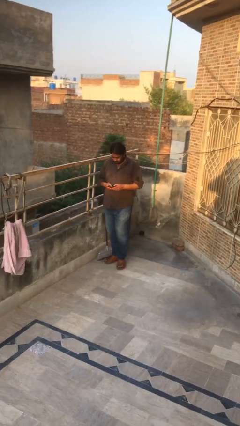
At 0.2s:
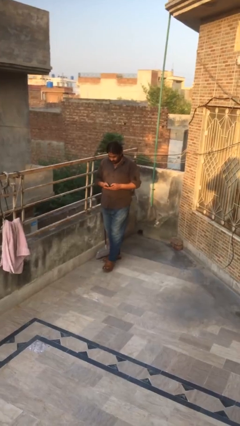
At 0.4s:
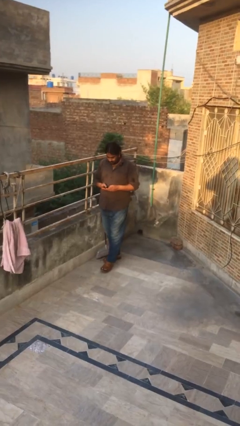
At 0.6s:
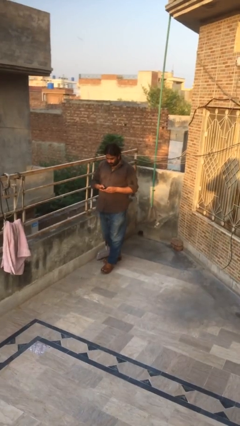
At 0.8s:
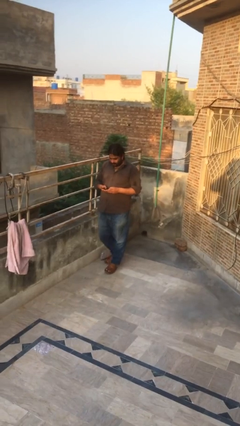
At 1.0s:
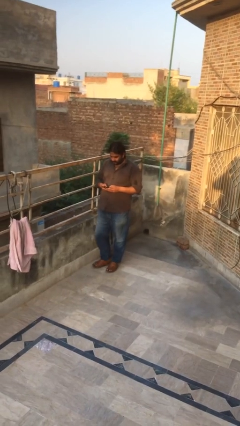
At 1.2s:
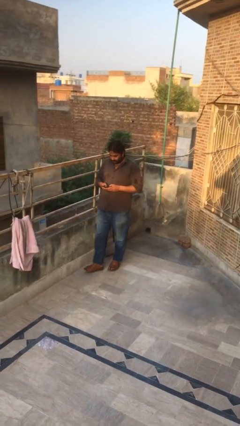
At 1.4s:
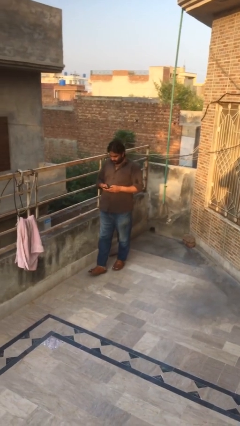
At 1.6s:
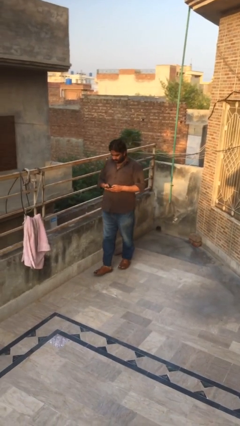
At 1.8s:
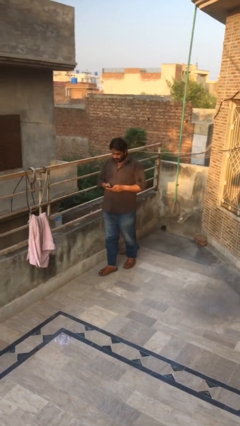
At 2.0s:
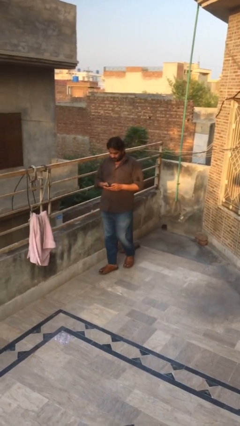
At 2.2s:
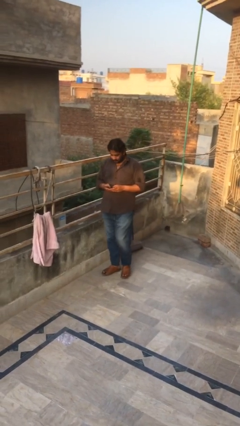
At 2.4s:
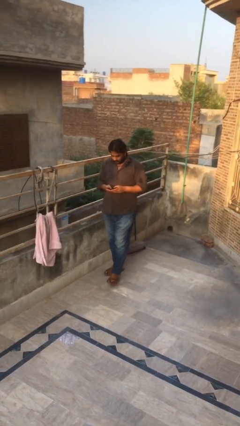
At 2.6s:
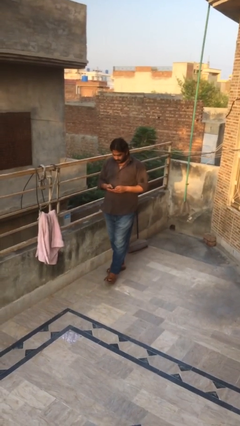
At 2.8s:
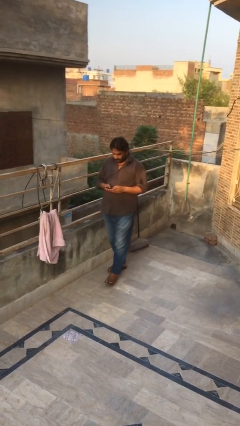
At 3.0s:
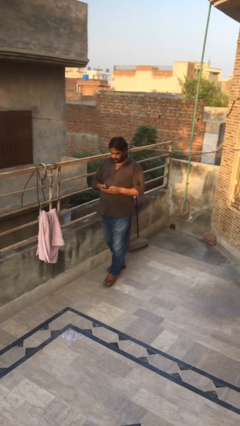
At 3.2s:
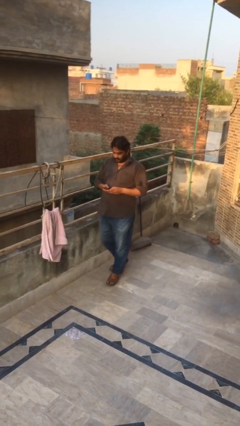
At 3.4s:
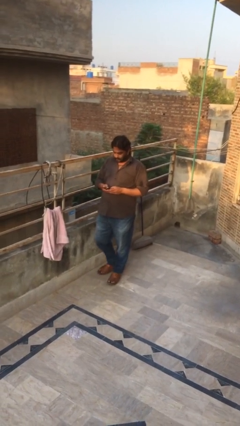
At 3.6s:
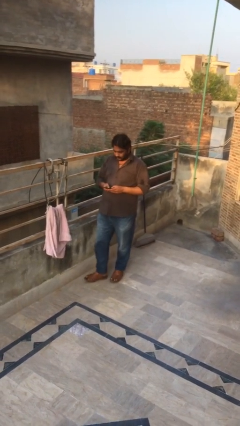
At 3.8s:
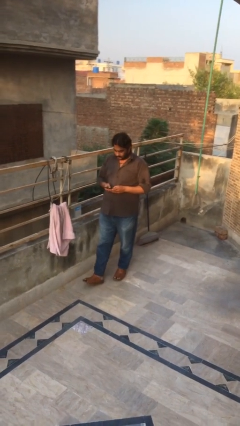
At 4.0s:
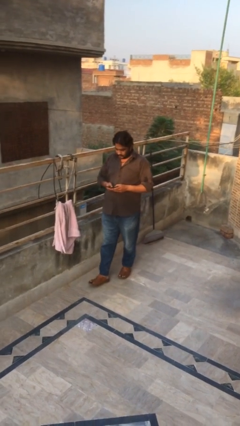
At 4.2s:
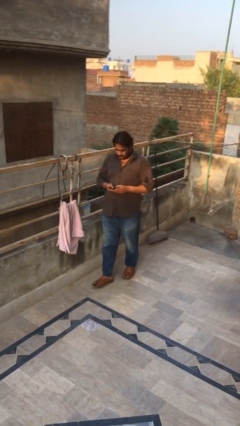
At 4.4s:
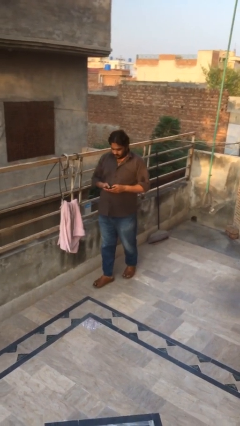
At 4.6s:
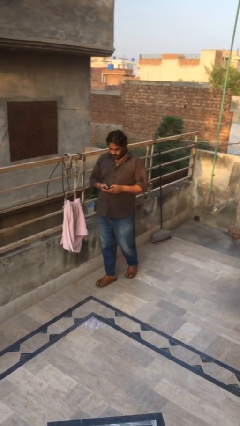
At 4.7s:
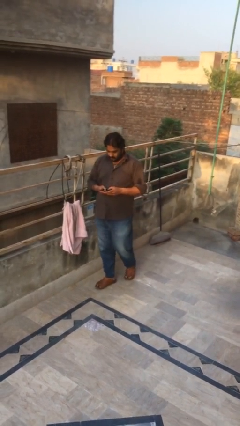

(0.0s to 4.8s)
person texts on phone

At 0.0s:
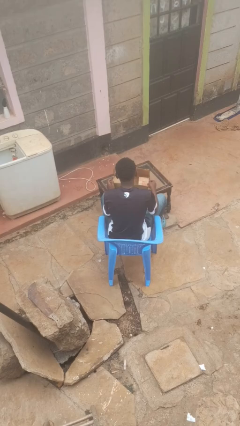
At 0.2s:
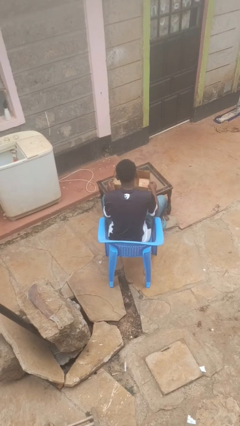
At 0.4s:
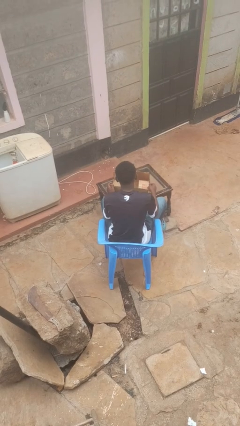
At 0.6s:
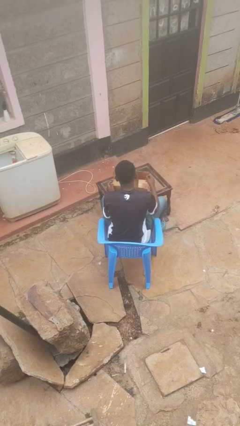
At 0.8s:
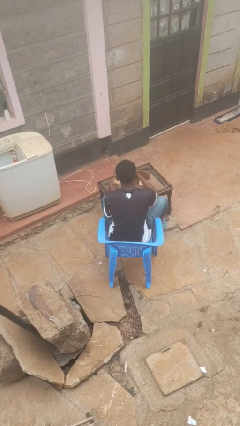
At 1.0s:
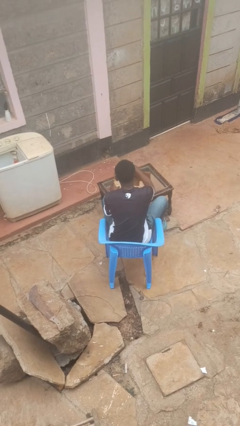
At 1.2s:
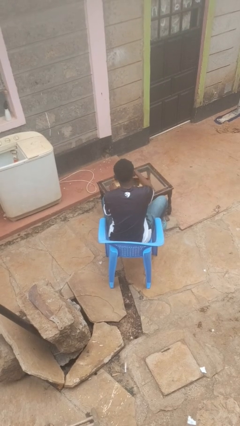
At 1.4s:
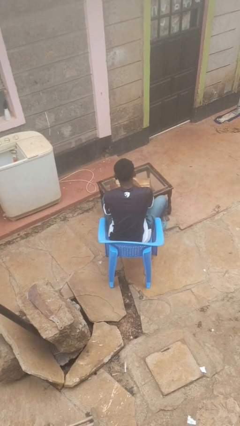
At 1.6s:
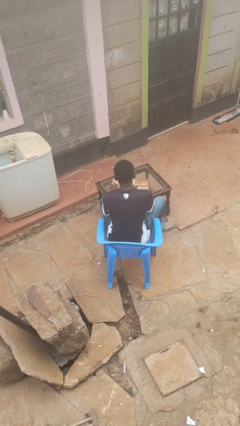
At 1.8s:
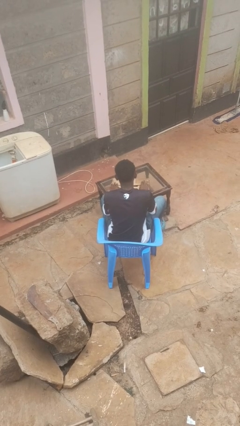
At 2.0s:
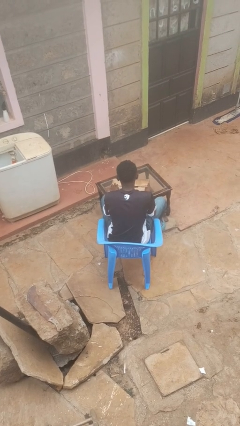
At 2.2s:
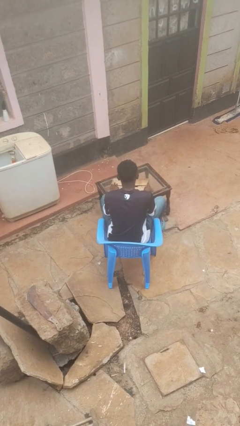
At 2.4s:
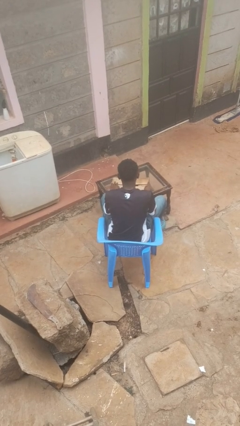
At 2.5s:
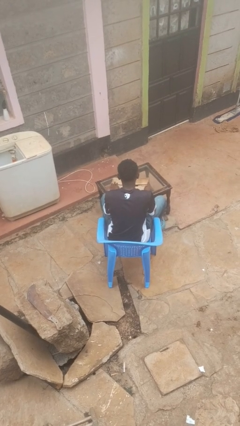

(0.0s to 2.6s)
person closes box

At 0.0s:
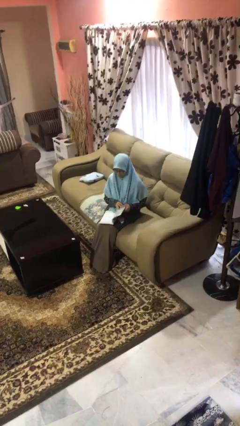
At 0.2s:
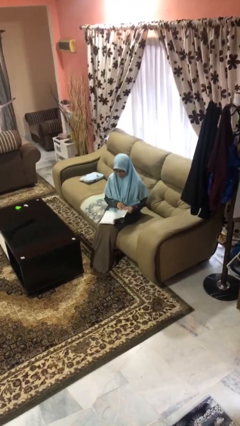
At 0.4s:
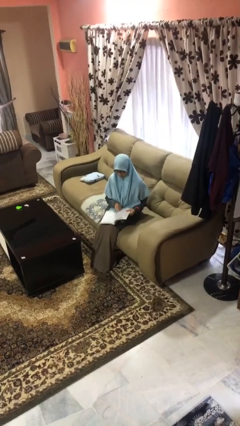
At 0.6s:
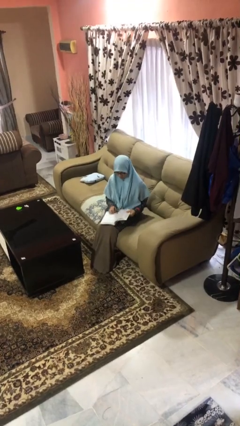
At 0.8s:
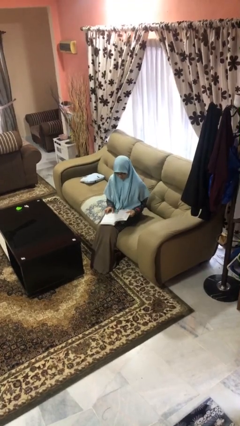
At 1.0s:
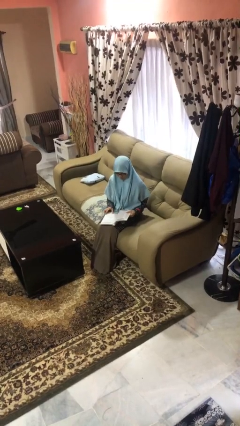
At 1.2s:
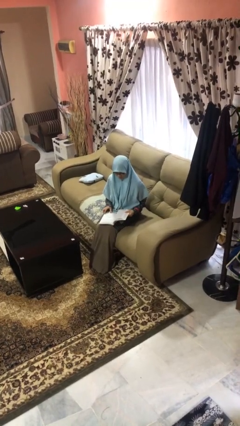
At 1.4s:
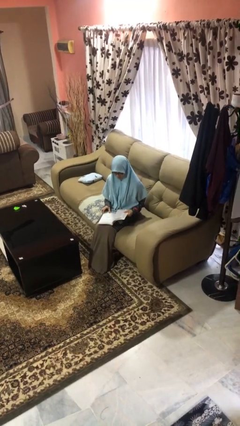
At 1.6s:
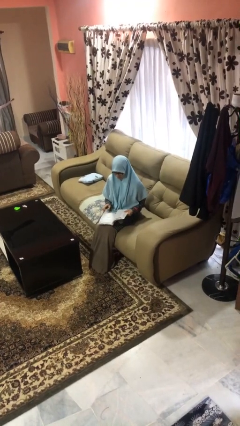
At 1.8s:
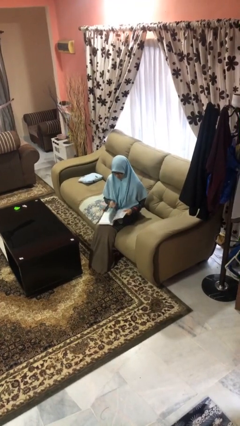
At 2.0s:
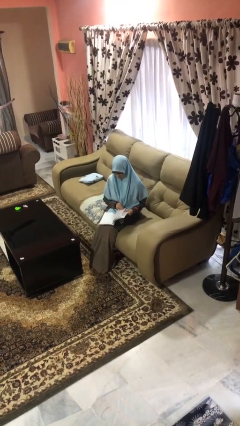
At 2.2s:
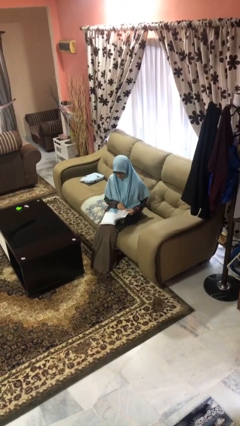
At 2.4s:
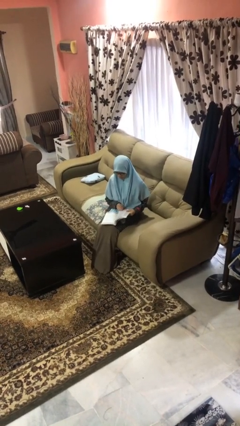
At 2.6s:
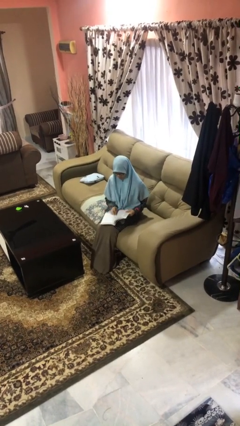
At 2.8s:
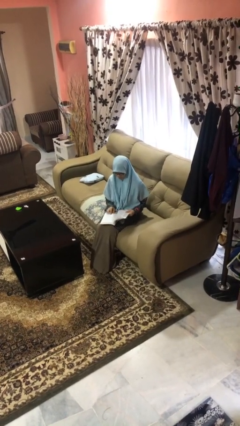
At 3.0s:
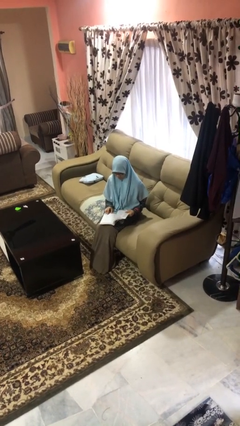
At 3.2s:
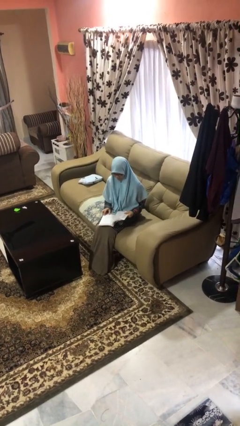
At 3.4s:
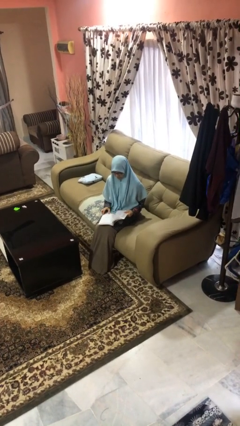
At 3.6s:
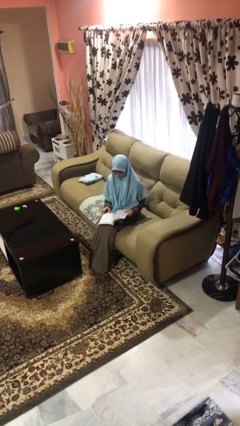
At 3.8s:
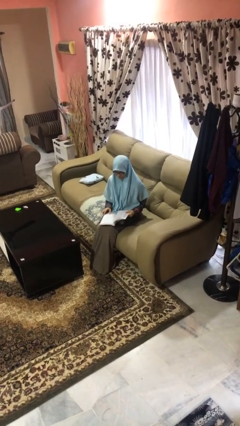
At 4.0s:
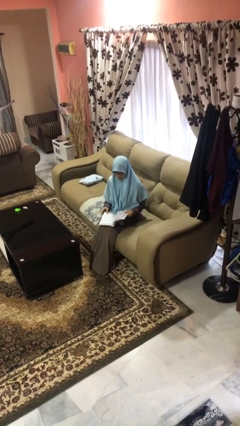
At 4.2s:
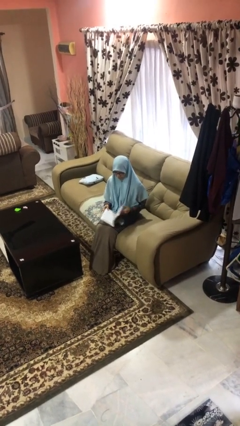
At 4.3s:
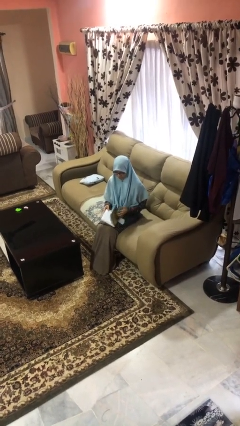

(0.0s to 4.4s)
person reads magazine

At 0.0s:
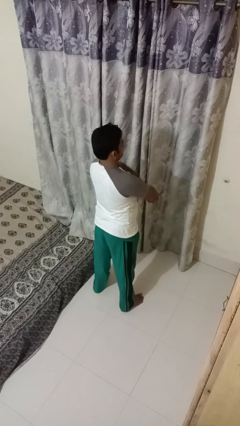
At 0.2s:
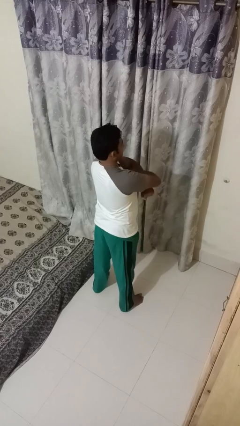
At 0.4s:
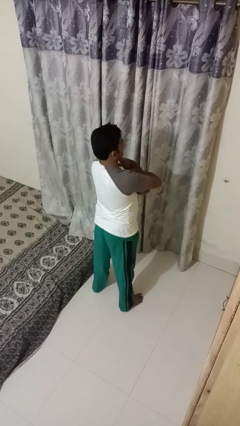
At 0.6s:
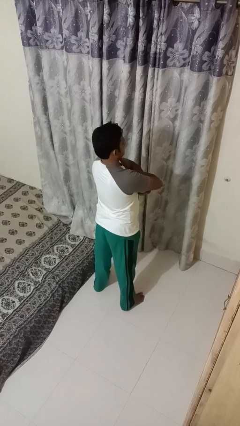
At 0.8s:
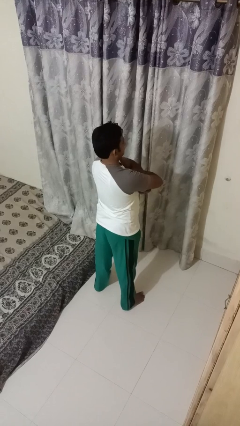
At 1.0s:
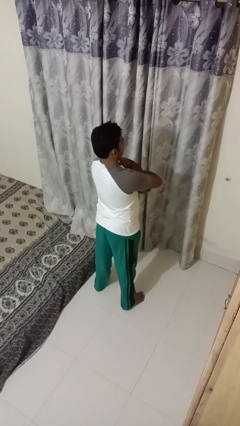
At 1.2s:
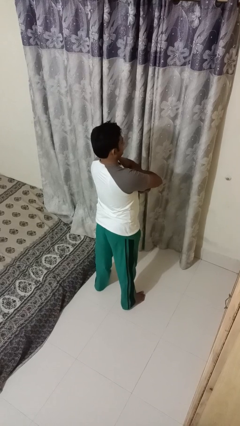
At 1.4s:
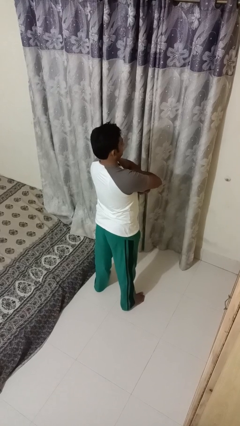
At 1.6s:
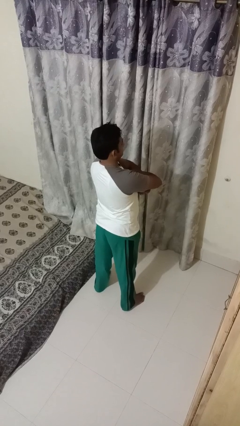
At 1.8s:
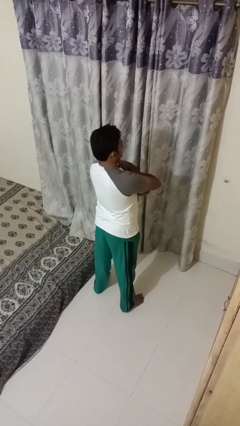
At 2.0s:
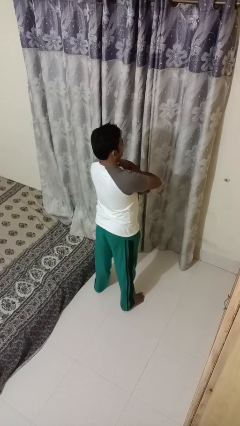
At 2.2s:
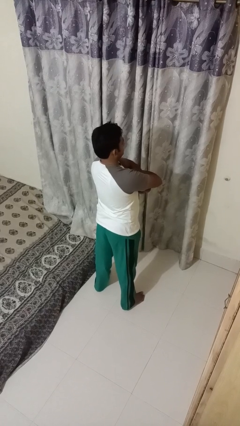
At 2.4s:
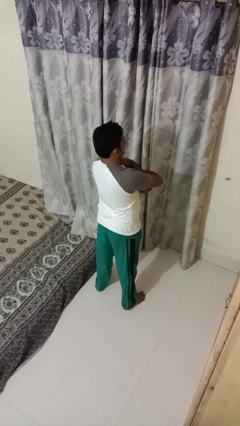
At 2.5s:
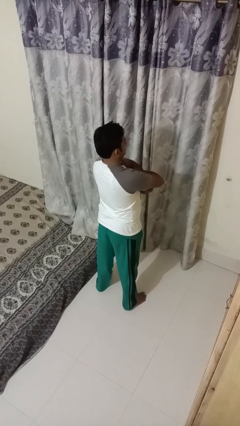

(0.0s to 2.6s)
person gestures arms x

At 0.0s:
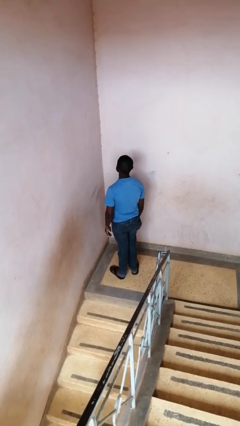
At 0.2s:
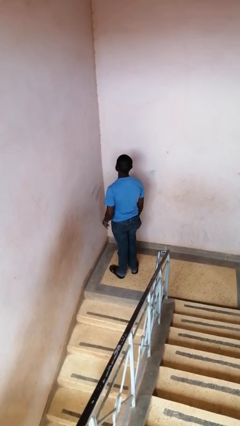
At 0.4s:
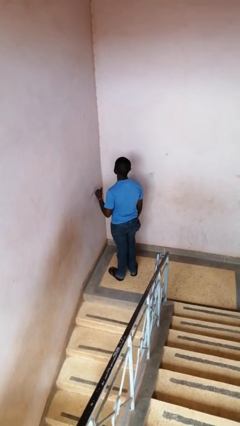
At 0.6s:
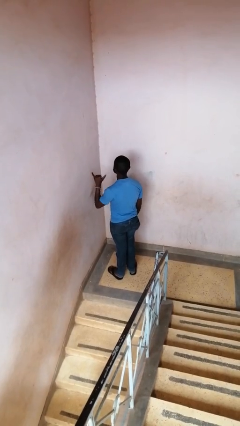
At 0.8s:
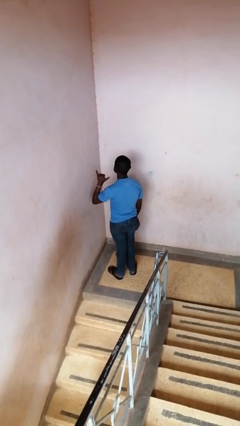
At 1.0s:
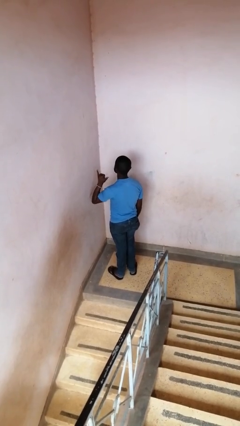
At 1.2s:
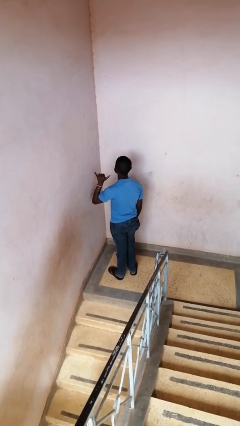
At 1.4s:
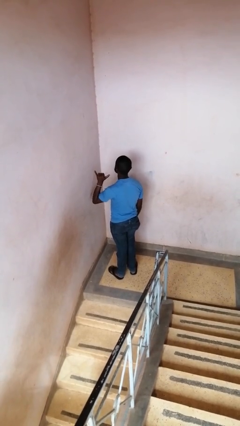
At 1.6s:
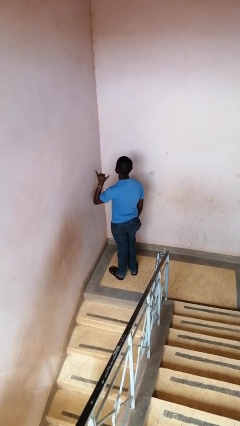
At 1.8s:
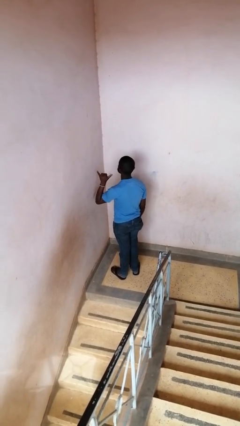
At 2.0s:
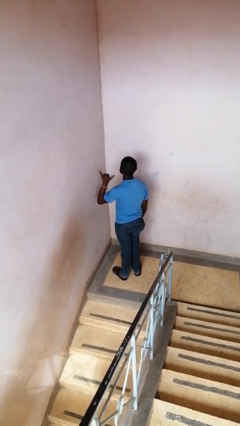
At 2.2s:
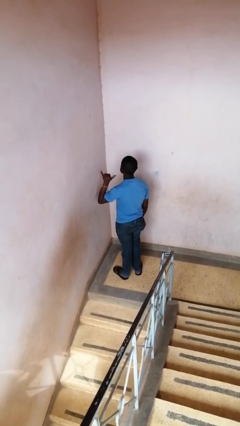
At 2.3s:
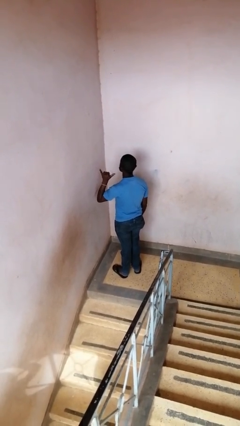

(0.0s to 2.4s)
person gestures hang loose

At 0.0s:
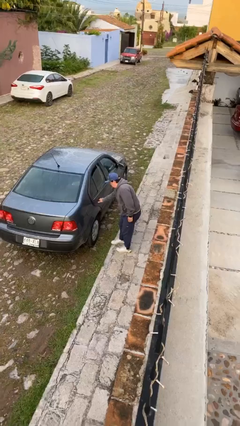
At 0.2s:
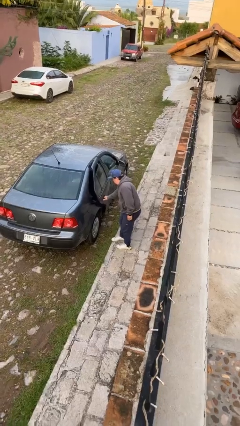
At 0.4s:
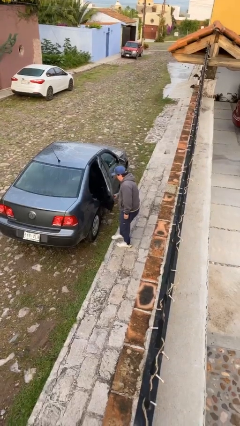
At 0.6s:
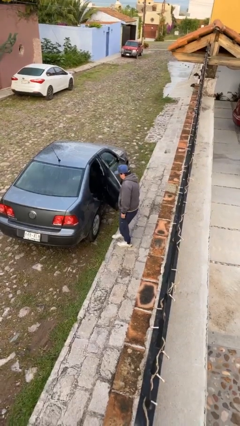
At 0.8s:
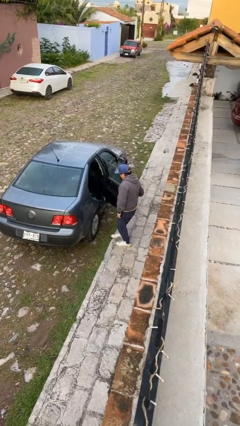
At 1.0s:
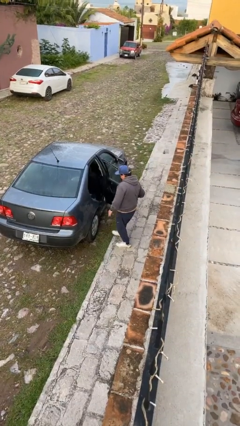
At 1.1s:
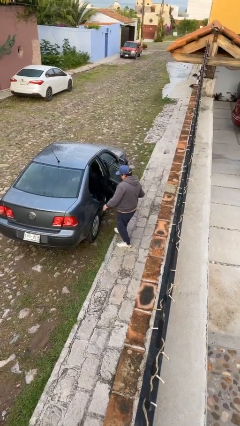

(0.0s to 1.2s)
person opens car door
